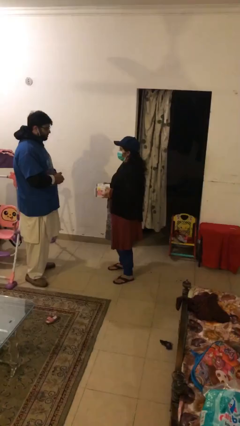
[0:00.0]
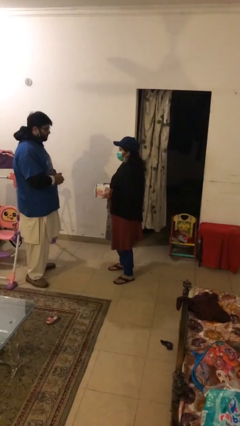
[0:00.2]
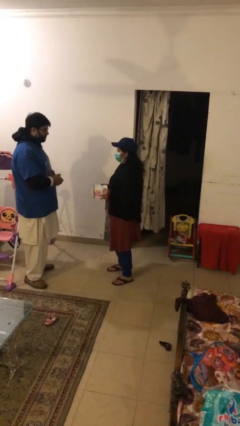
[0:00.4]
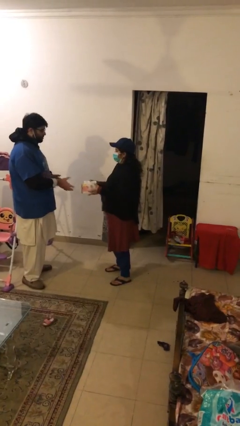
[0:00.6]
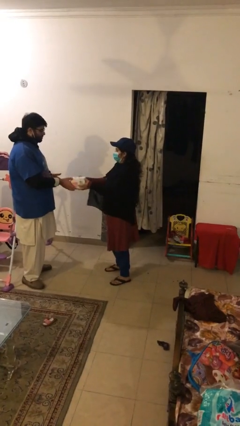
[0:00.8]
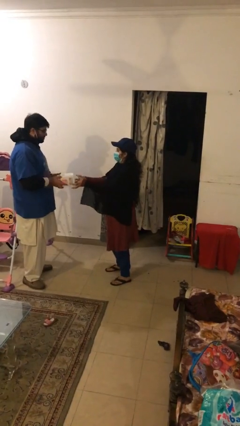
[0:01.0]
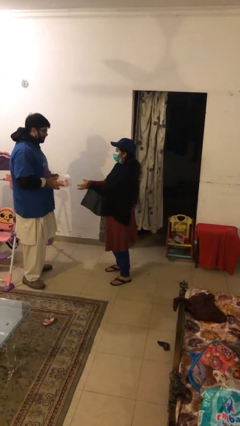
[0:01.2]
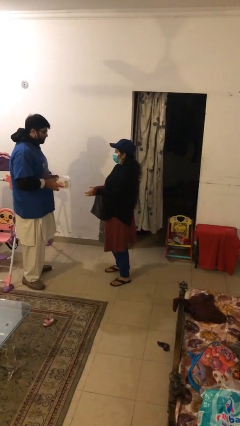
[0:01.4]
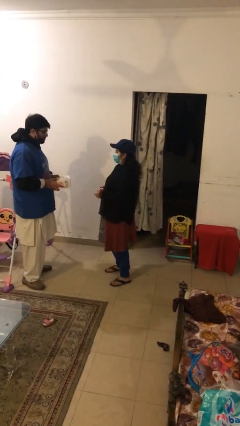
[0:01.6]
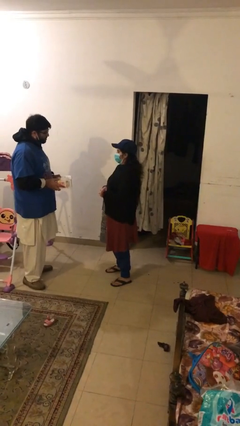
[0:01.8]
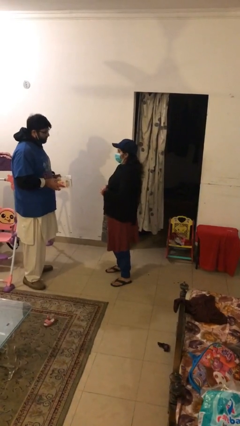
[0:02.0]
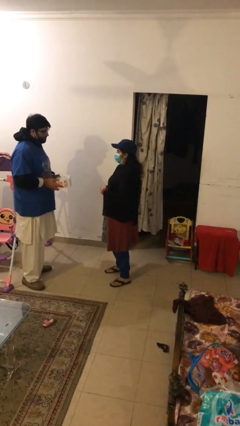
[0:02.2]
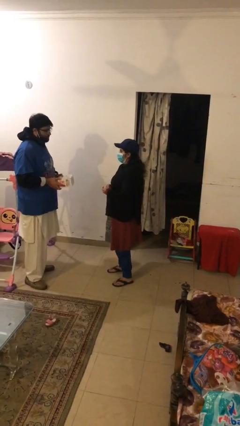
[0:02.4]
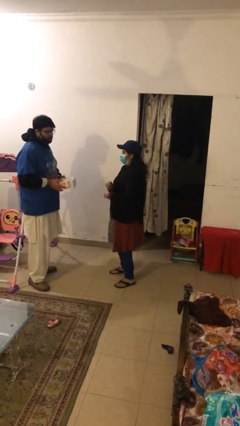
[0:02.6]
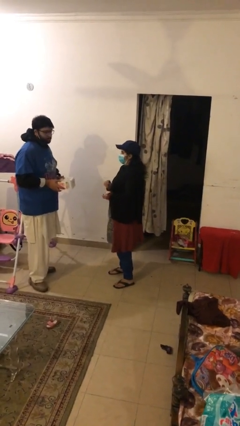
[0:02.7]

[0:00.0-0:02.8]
person transfers object to person

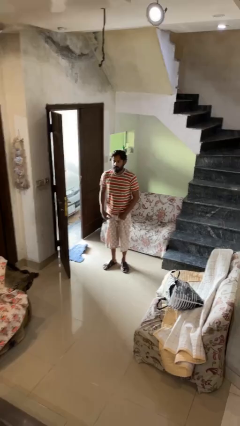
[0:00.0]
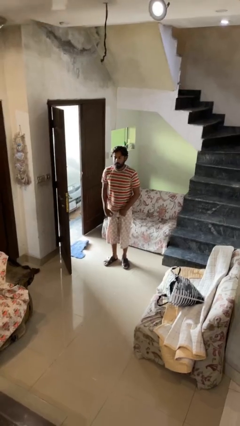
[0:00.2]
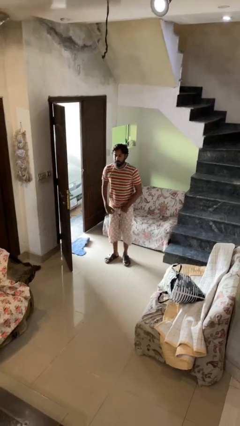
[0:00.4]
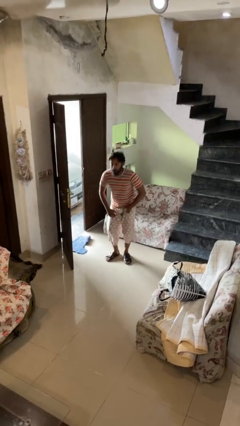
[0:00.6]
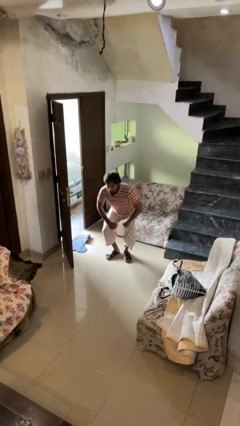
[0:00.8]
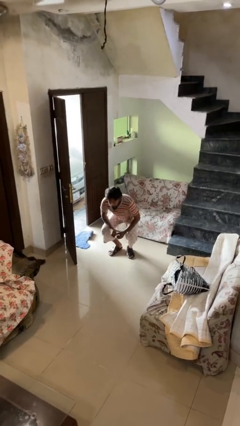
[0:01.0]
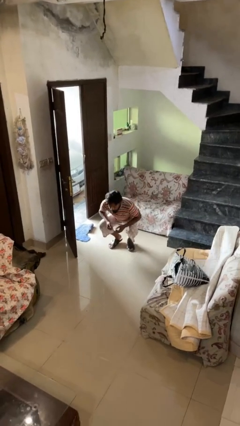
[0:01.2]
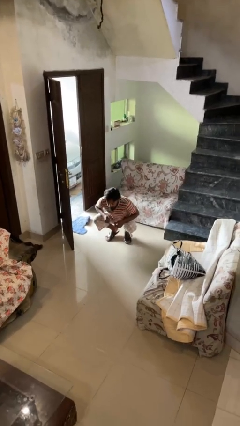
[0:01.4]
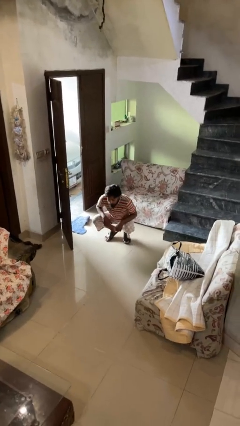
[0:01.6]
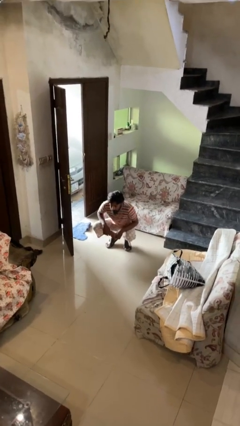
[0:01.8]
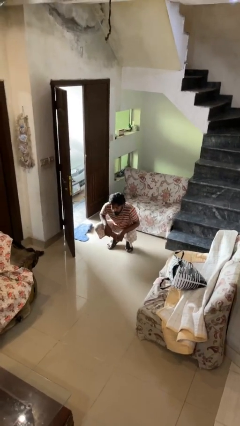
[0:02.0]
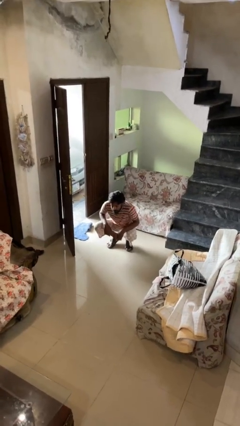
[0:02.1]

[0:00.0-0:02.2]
person squats

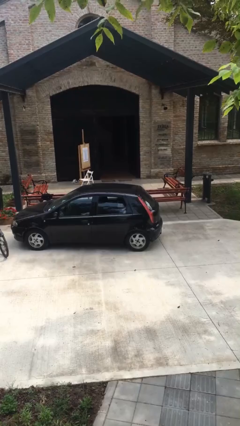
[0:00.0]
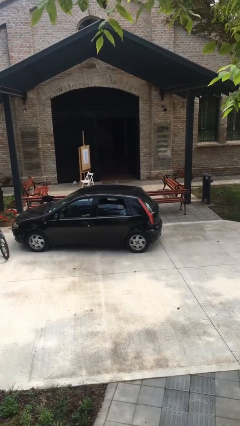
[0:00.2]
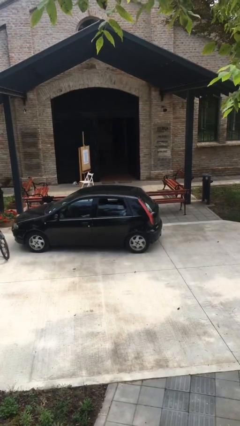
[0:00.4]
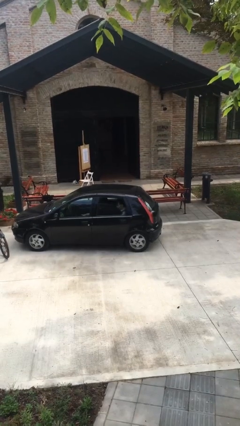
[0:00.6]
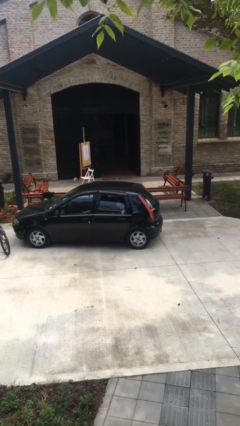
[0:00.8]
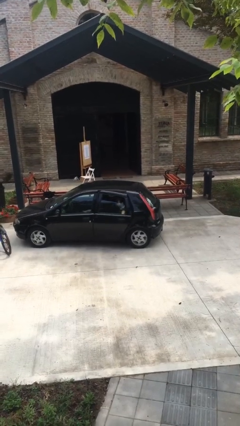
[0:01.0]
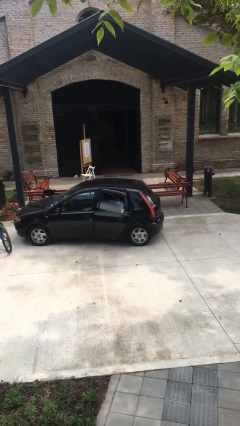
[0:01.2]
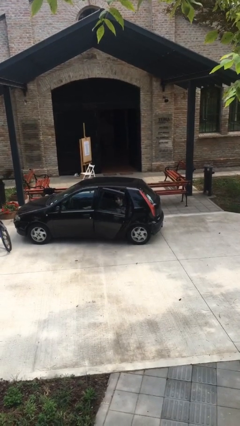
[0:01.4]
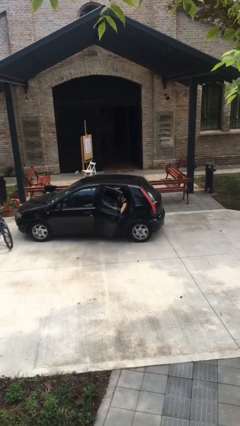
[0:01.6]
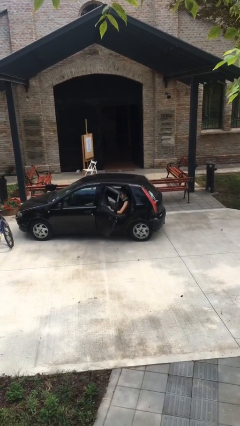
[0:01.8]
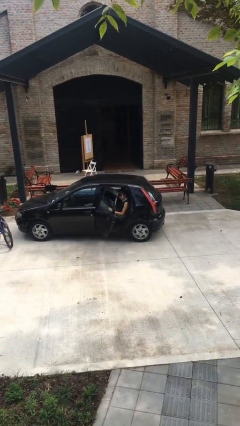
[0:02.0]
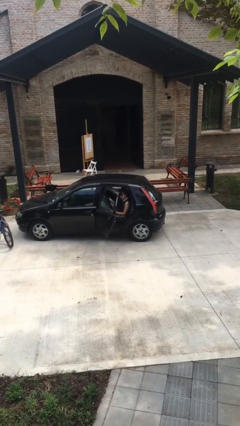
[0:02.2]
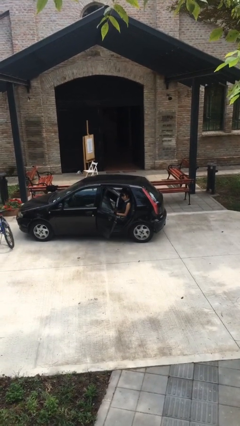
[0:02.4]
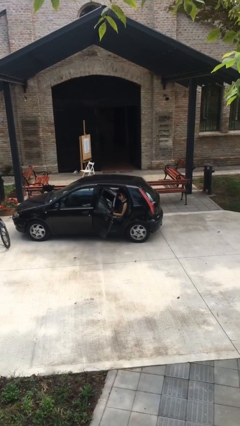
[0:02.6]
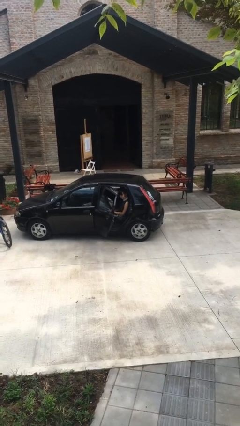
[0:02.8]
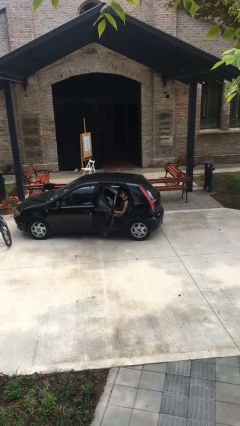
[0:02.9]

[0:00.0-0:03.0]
person opens car door

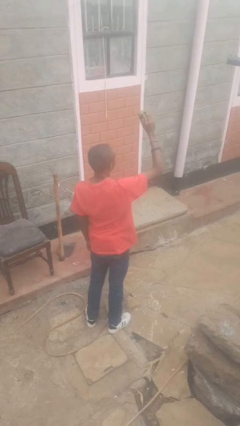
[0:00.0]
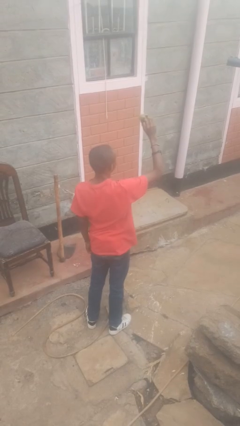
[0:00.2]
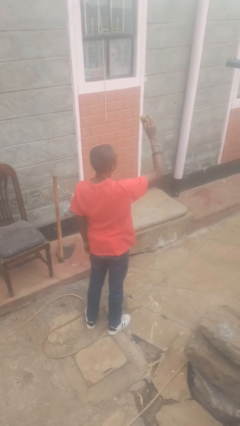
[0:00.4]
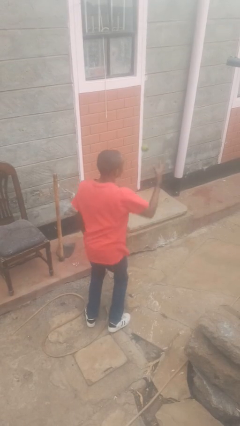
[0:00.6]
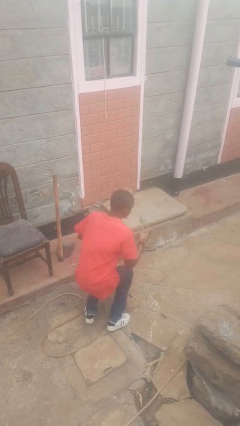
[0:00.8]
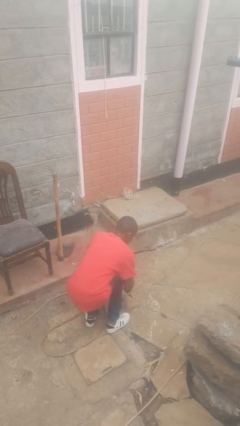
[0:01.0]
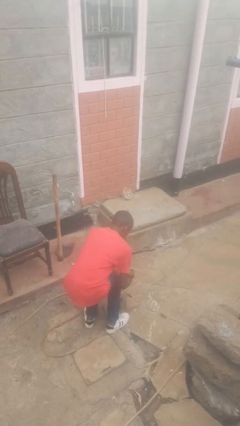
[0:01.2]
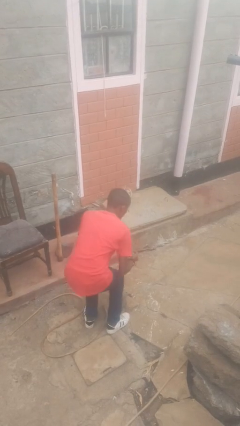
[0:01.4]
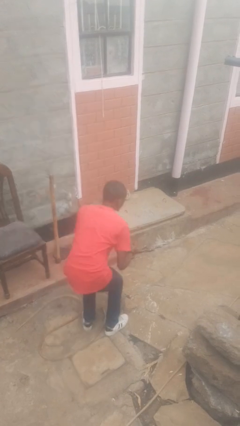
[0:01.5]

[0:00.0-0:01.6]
person drops object

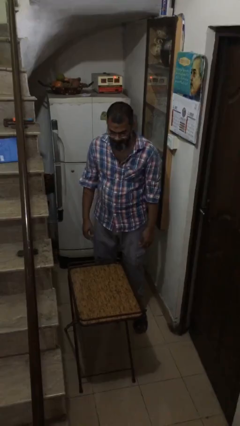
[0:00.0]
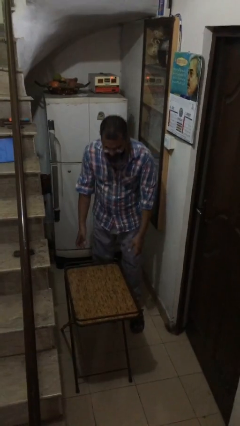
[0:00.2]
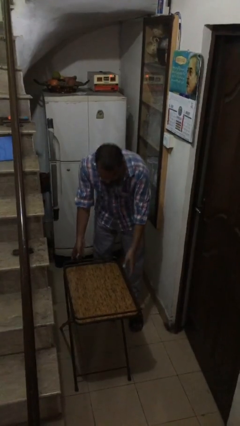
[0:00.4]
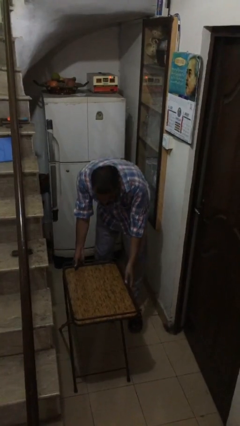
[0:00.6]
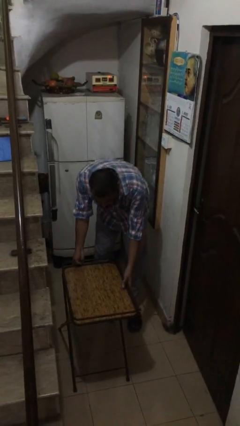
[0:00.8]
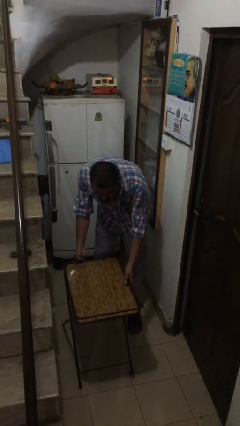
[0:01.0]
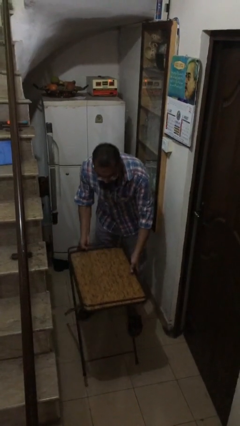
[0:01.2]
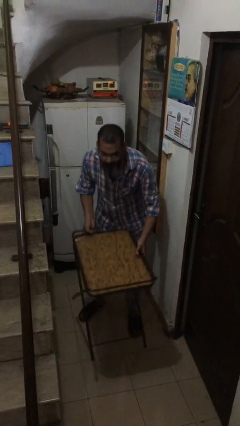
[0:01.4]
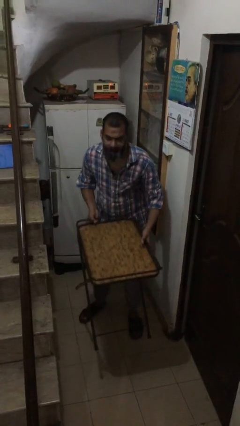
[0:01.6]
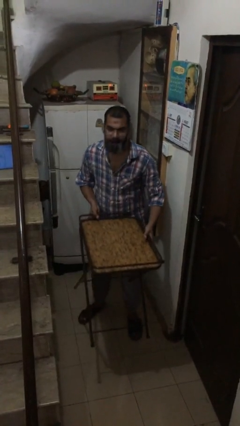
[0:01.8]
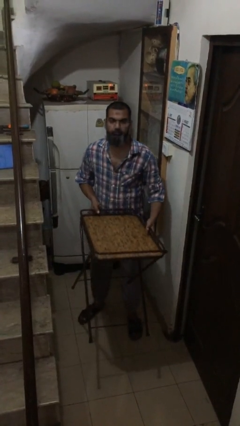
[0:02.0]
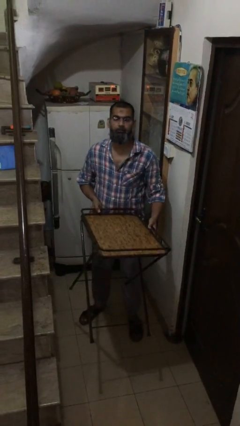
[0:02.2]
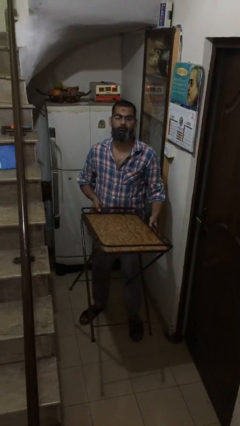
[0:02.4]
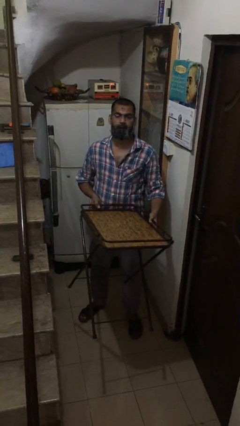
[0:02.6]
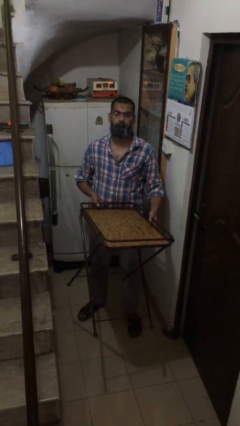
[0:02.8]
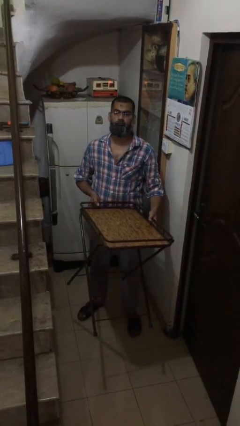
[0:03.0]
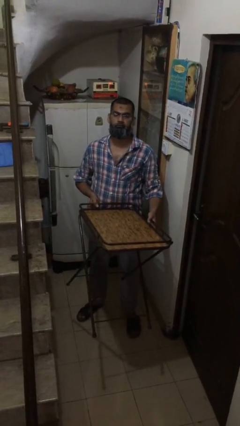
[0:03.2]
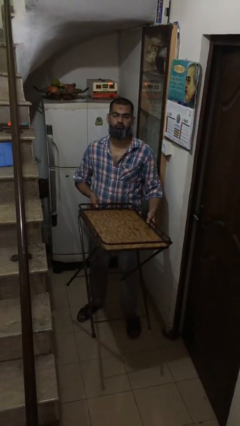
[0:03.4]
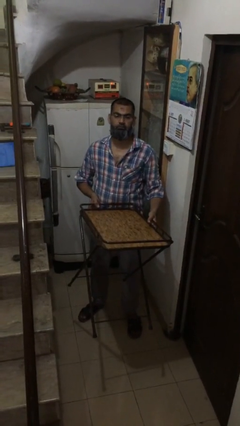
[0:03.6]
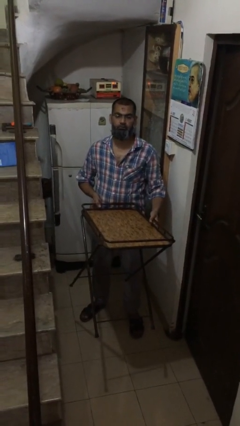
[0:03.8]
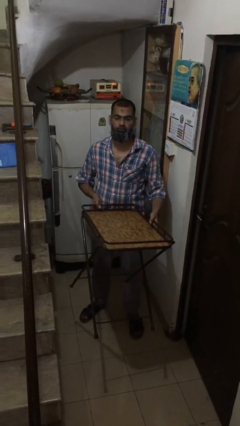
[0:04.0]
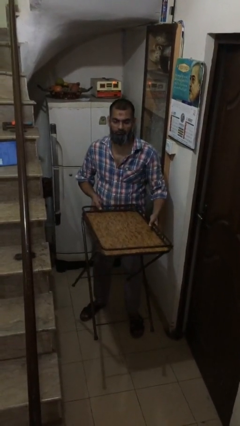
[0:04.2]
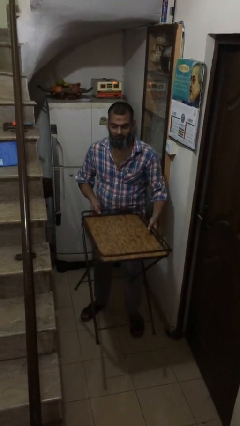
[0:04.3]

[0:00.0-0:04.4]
person carries heavy object

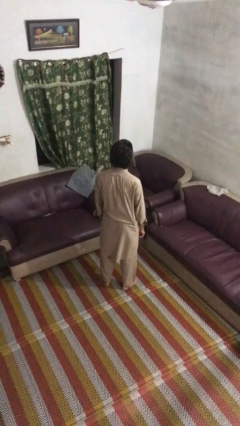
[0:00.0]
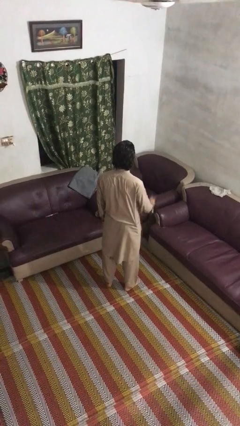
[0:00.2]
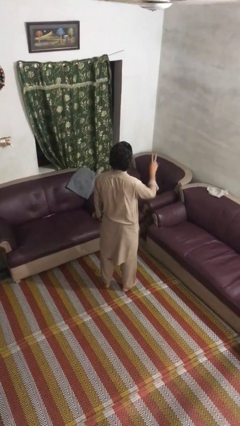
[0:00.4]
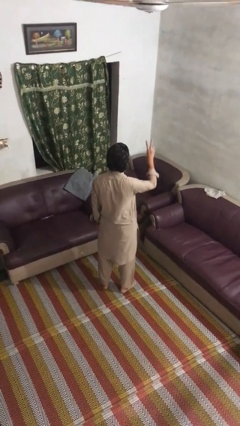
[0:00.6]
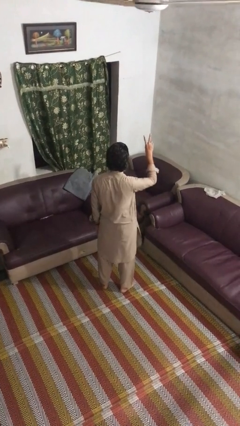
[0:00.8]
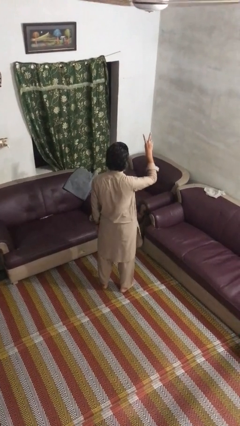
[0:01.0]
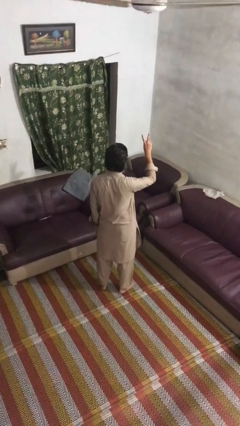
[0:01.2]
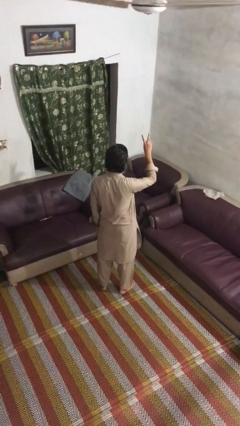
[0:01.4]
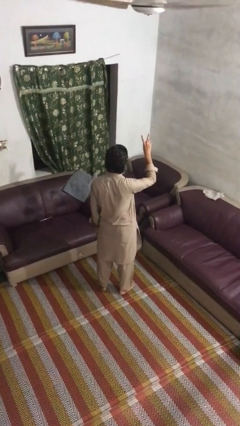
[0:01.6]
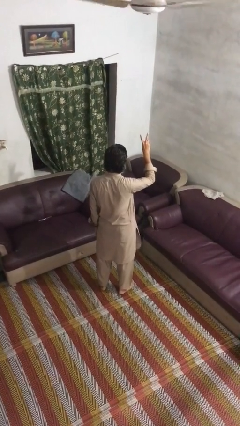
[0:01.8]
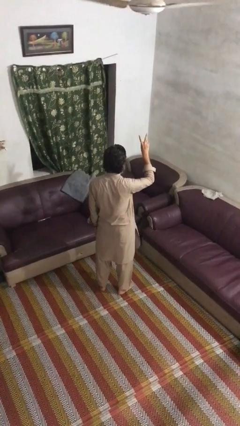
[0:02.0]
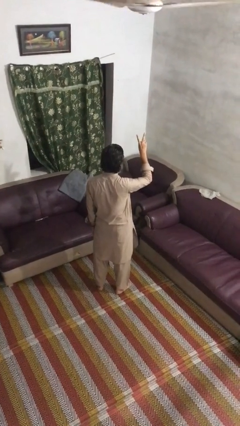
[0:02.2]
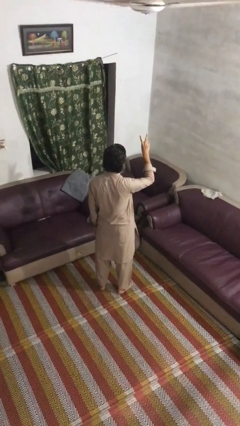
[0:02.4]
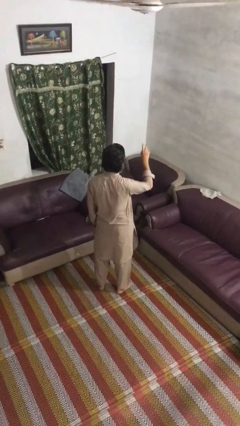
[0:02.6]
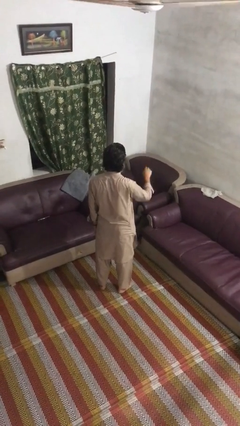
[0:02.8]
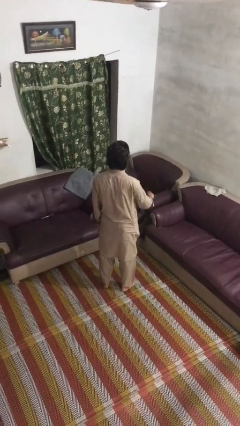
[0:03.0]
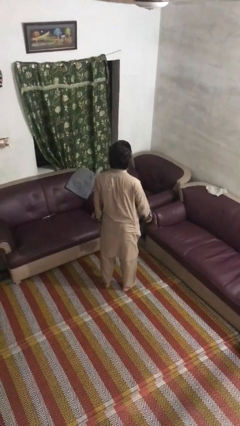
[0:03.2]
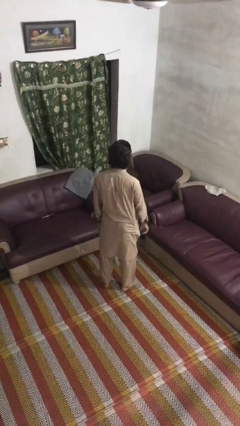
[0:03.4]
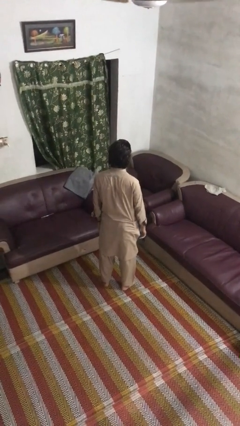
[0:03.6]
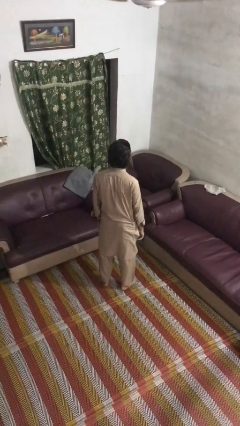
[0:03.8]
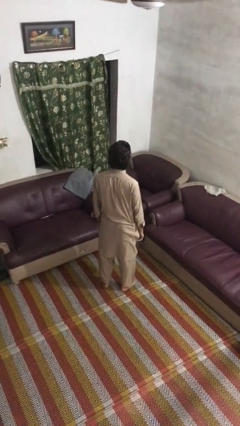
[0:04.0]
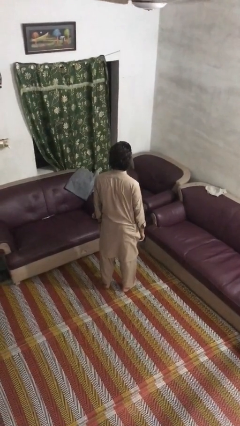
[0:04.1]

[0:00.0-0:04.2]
person gestures peace
